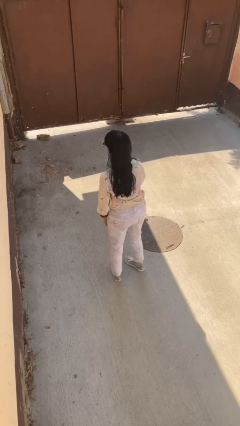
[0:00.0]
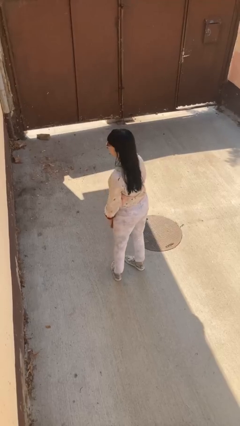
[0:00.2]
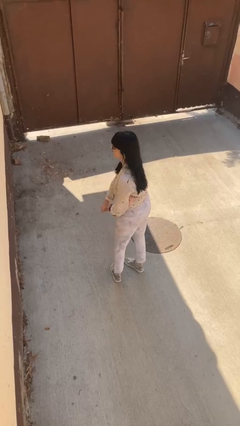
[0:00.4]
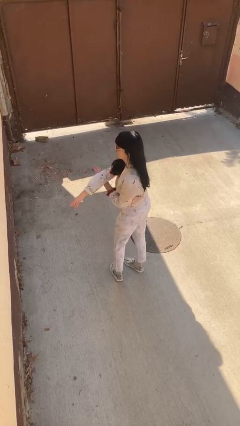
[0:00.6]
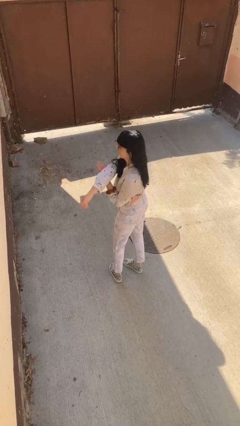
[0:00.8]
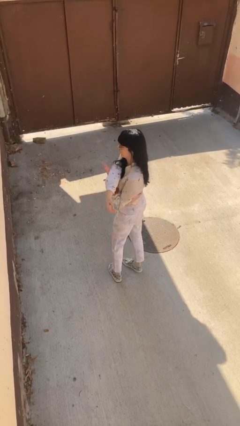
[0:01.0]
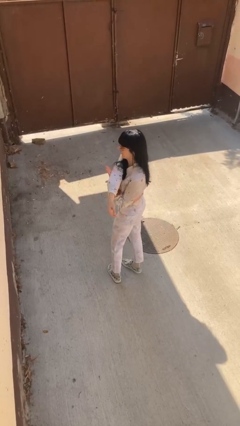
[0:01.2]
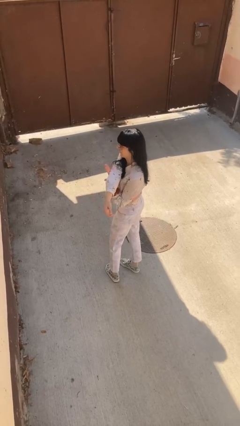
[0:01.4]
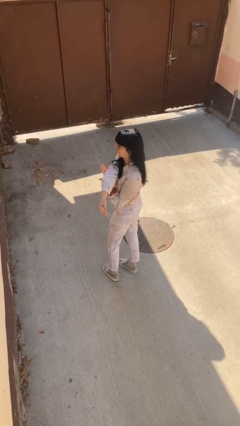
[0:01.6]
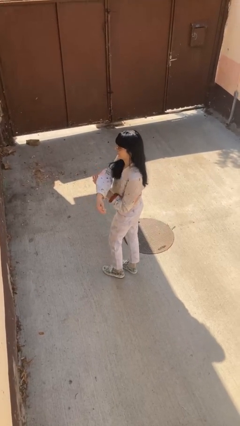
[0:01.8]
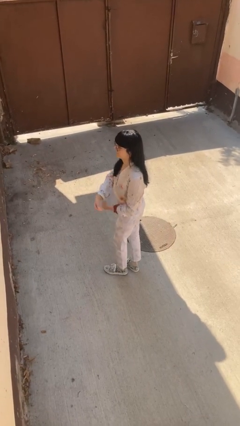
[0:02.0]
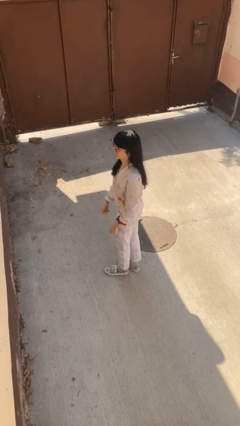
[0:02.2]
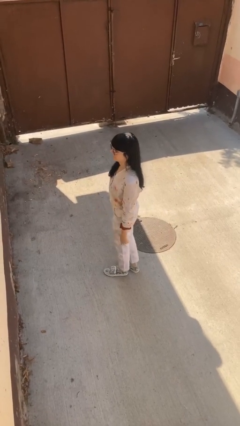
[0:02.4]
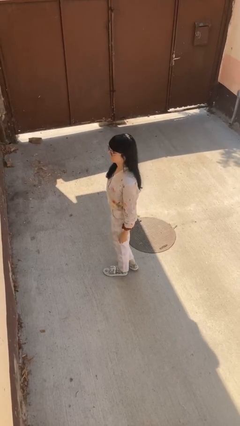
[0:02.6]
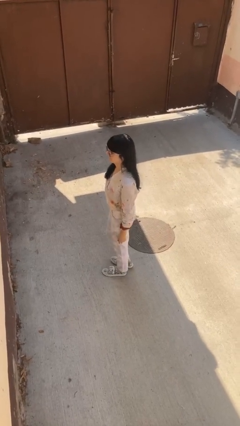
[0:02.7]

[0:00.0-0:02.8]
person stretches arms to side

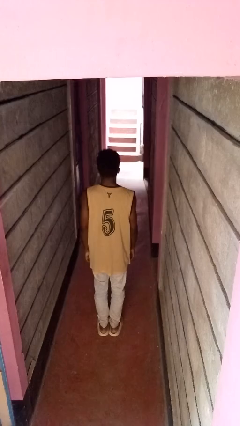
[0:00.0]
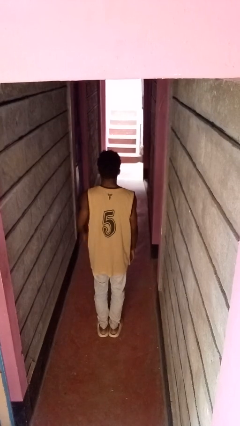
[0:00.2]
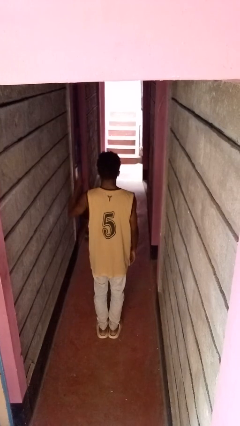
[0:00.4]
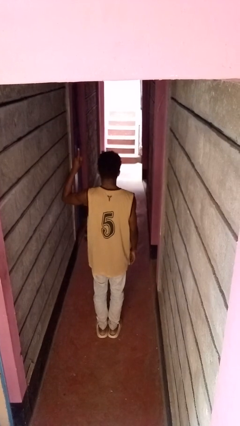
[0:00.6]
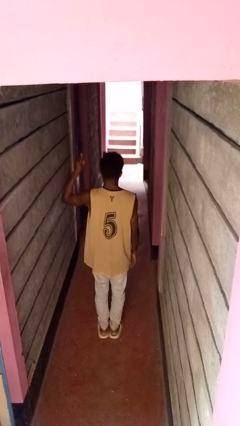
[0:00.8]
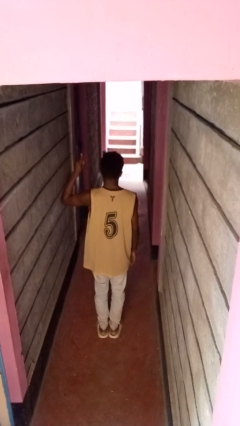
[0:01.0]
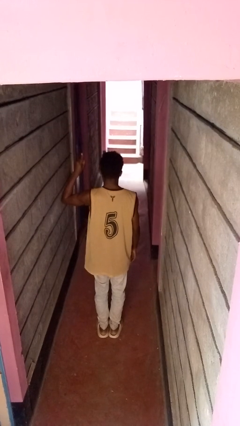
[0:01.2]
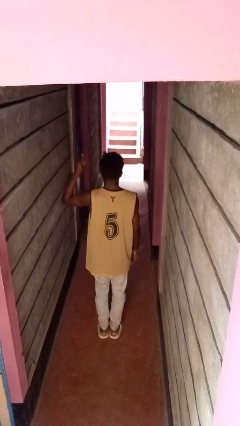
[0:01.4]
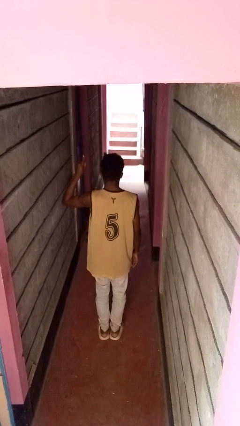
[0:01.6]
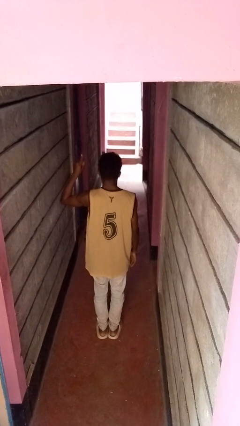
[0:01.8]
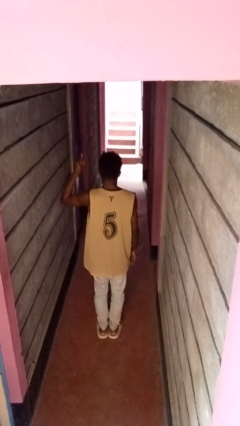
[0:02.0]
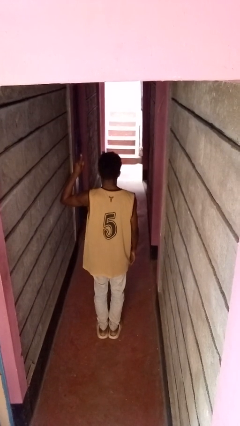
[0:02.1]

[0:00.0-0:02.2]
person gestures number one

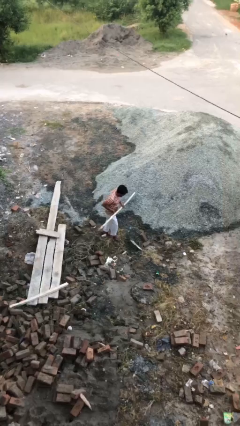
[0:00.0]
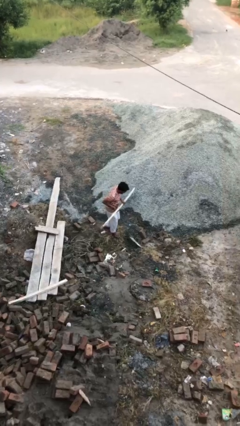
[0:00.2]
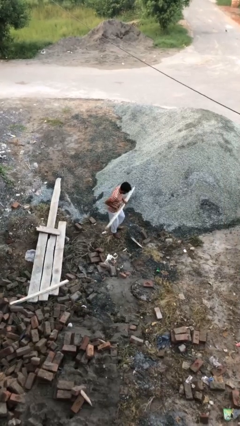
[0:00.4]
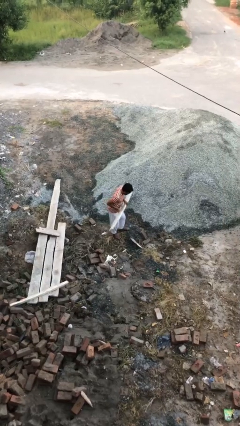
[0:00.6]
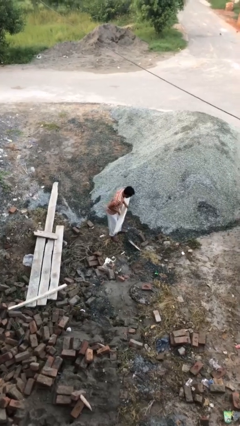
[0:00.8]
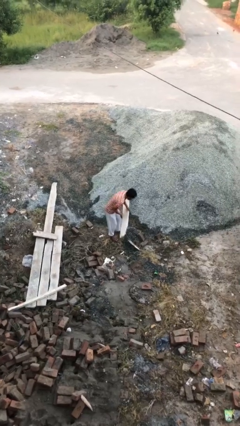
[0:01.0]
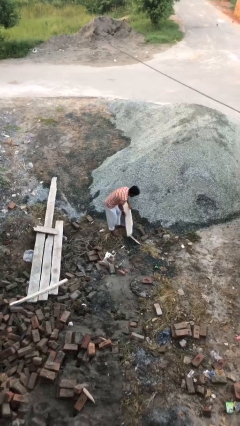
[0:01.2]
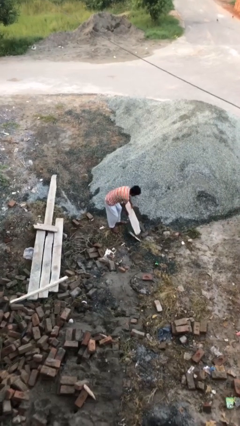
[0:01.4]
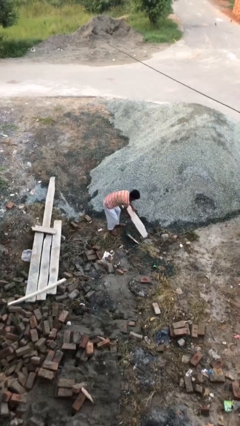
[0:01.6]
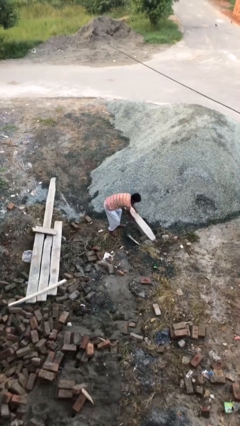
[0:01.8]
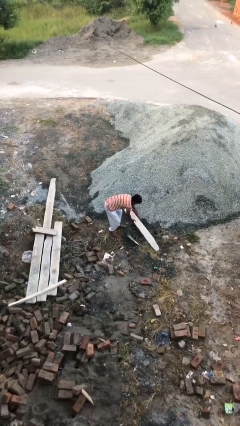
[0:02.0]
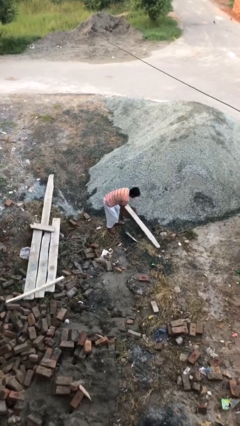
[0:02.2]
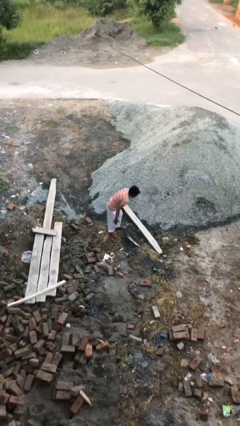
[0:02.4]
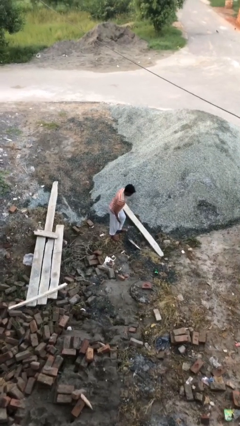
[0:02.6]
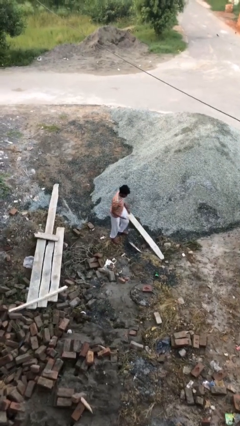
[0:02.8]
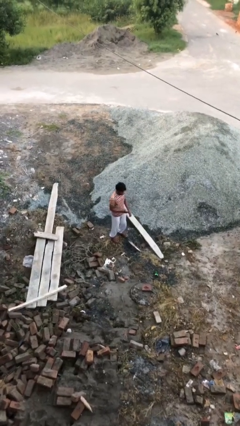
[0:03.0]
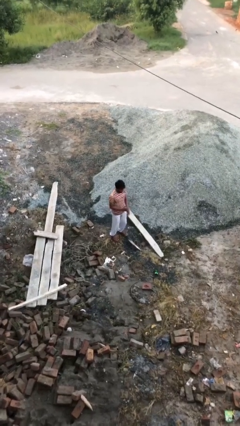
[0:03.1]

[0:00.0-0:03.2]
person puts down object on floor

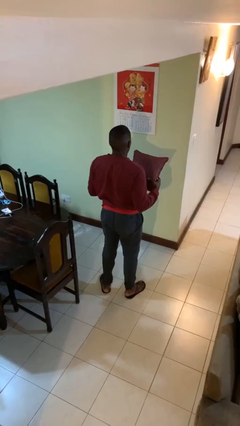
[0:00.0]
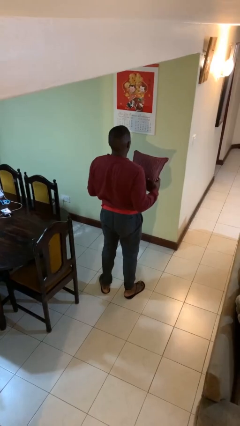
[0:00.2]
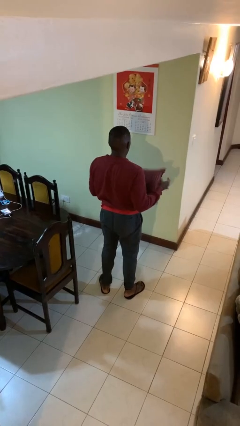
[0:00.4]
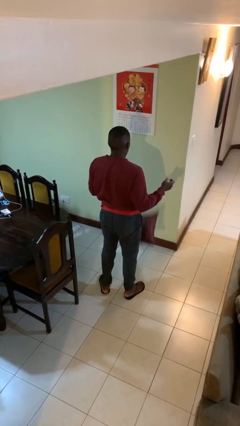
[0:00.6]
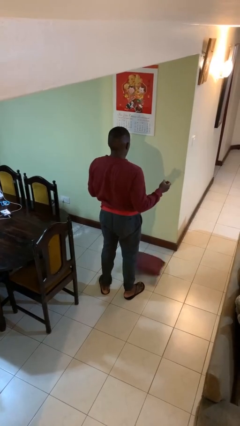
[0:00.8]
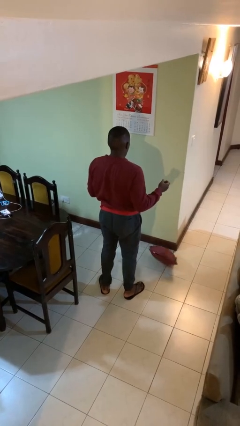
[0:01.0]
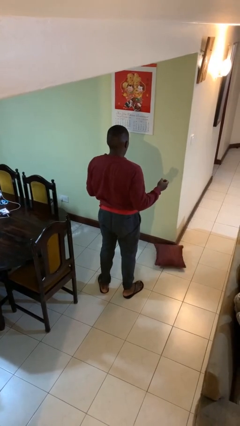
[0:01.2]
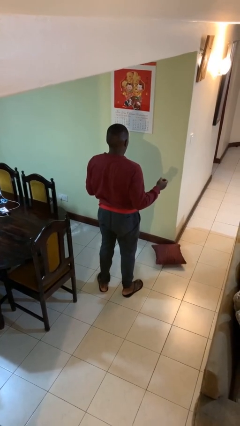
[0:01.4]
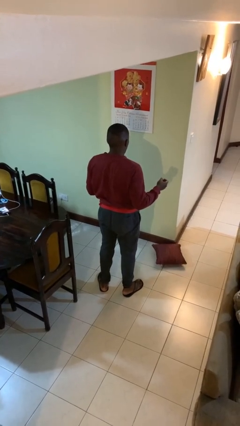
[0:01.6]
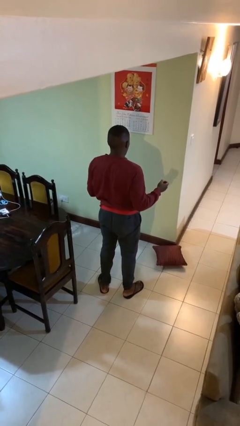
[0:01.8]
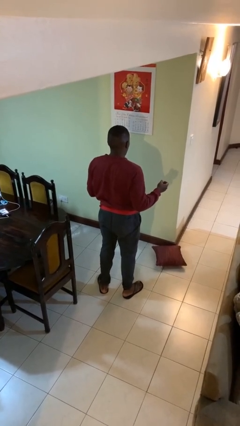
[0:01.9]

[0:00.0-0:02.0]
person drops object

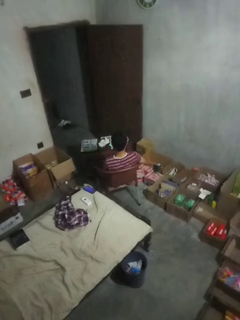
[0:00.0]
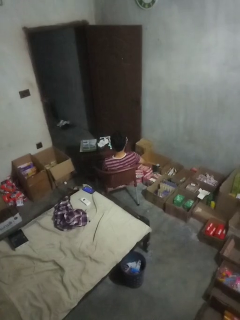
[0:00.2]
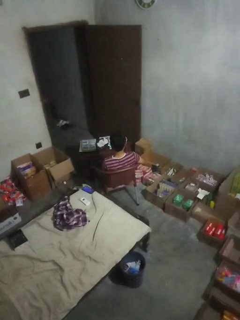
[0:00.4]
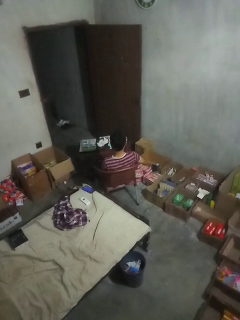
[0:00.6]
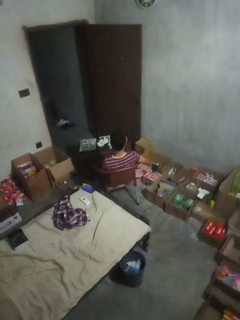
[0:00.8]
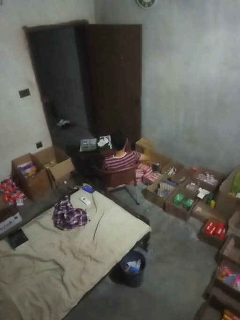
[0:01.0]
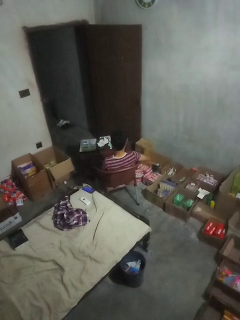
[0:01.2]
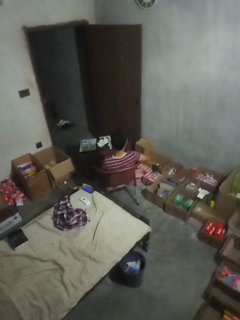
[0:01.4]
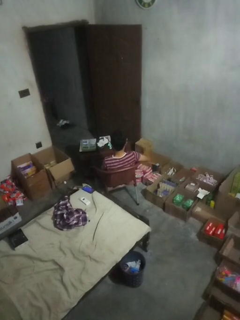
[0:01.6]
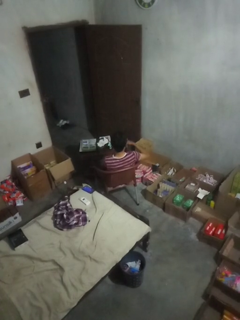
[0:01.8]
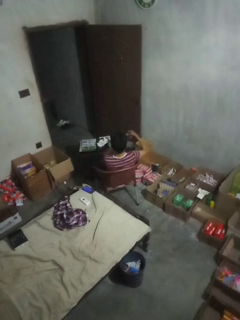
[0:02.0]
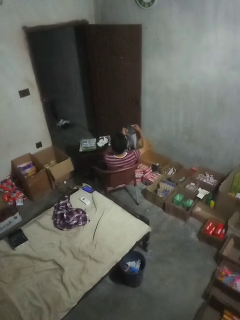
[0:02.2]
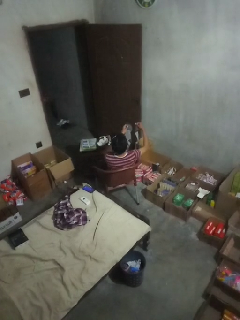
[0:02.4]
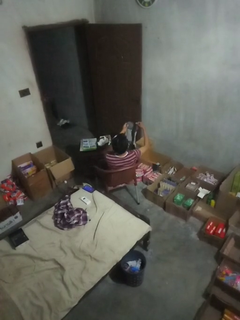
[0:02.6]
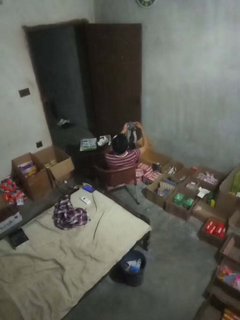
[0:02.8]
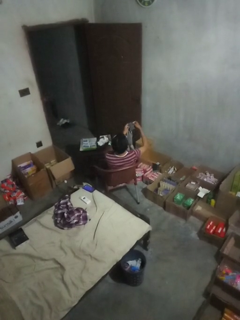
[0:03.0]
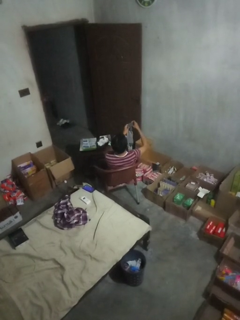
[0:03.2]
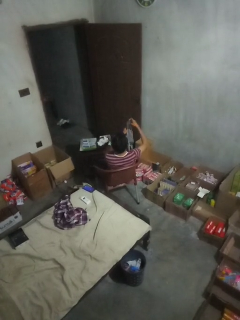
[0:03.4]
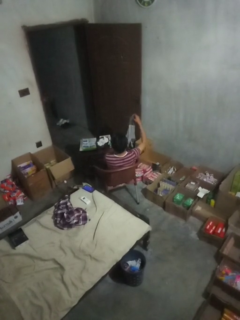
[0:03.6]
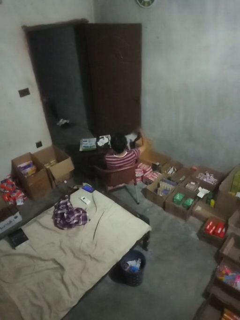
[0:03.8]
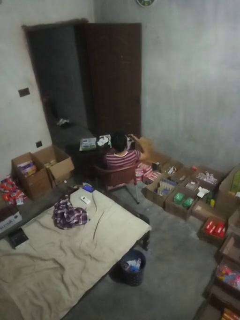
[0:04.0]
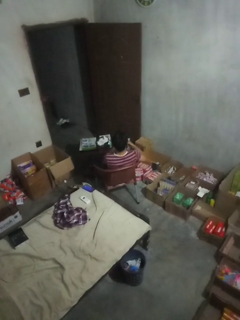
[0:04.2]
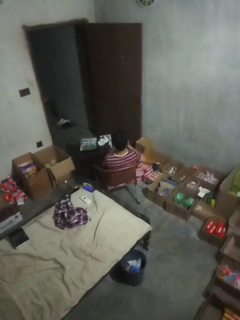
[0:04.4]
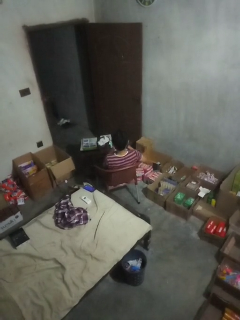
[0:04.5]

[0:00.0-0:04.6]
person folds socks

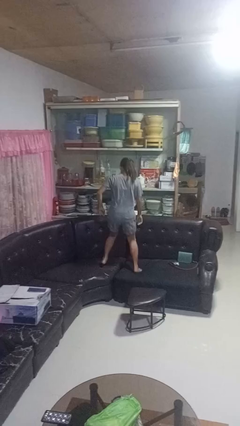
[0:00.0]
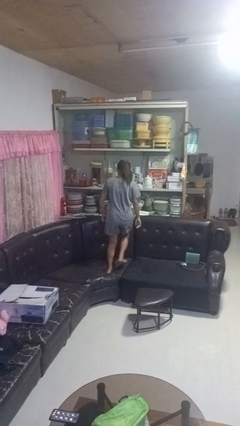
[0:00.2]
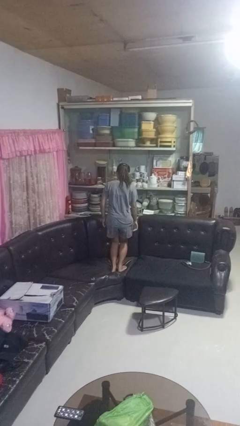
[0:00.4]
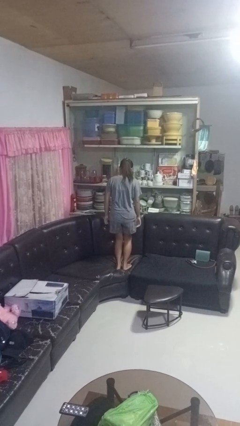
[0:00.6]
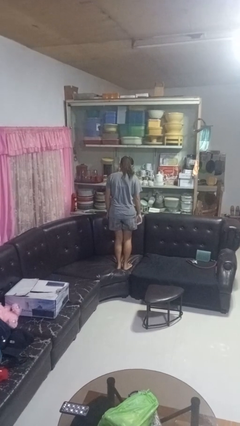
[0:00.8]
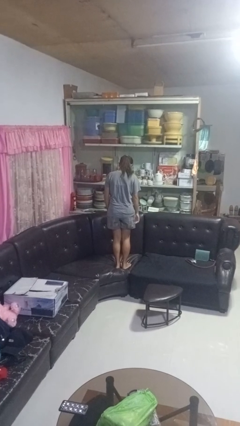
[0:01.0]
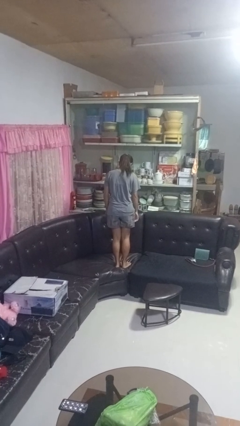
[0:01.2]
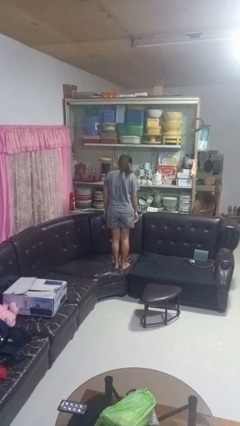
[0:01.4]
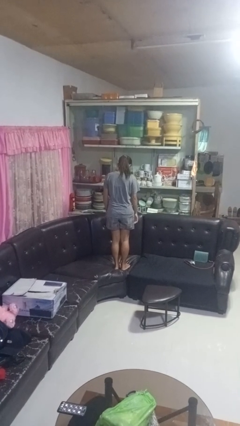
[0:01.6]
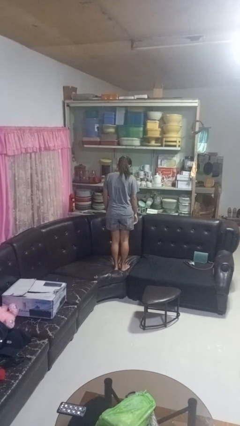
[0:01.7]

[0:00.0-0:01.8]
person jumps on couch

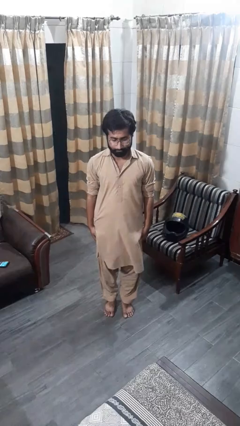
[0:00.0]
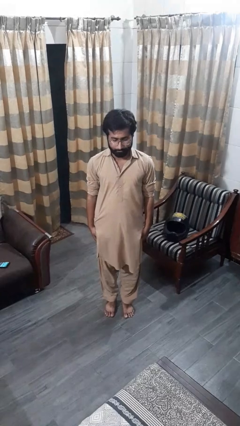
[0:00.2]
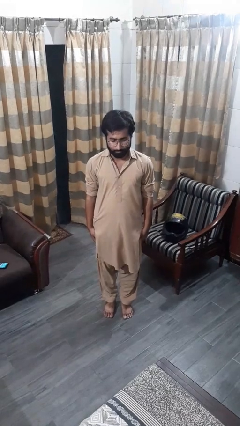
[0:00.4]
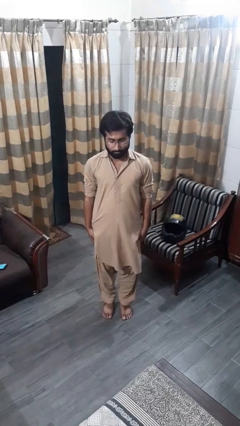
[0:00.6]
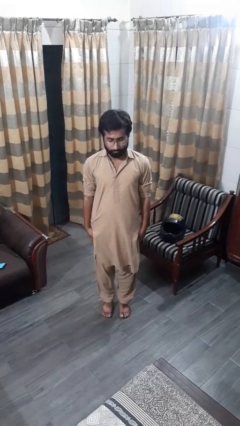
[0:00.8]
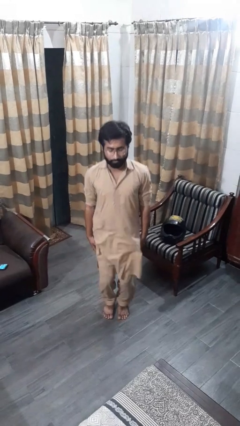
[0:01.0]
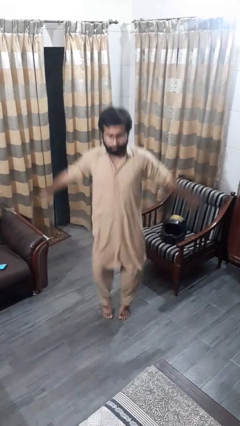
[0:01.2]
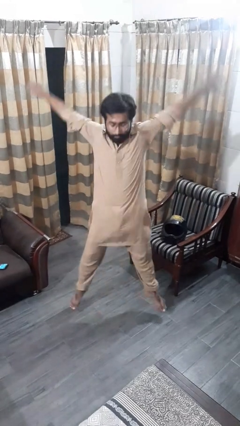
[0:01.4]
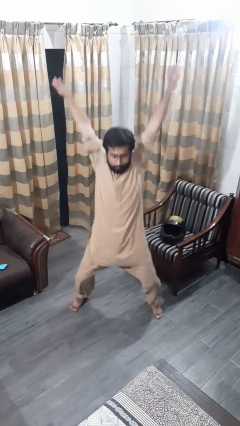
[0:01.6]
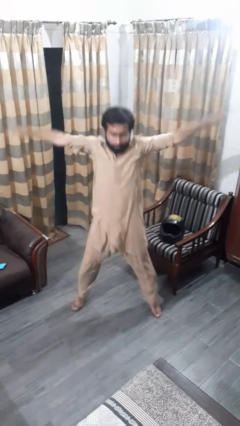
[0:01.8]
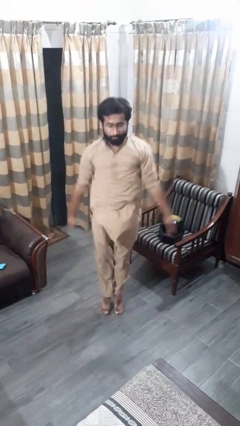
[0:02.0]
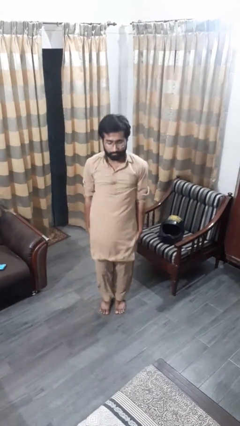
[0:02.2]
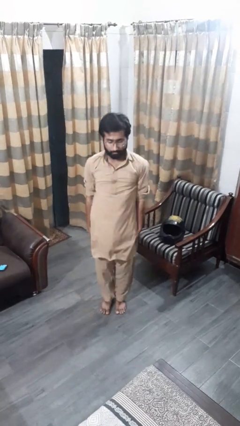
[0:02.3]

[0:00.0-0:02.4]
person exercises with jumping jacks
